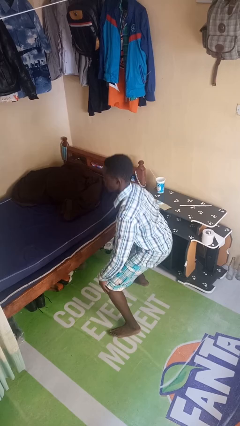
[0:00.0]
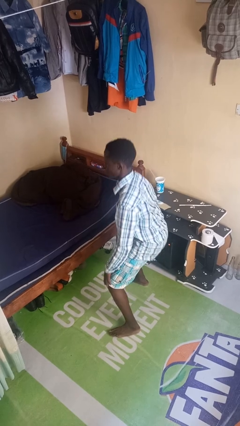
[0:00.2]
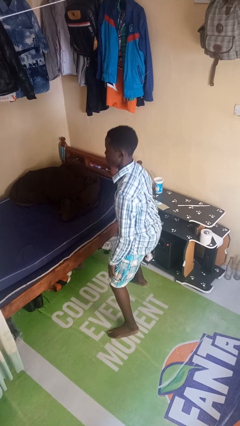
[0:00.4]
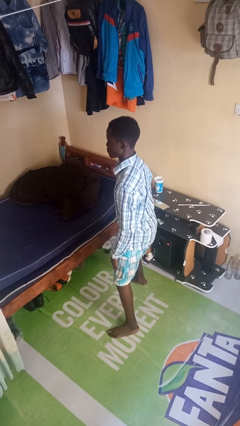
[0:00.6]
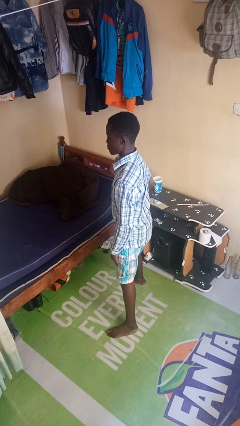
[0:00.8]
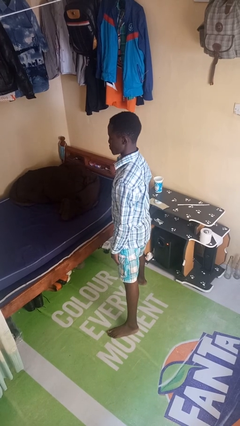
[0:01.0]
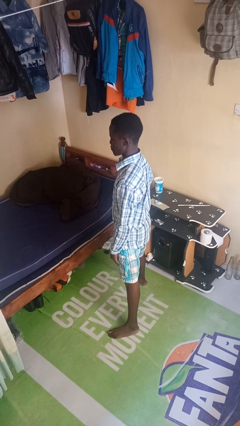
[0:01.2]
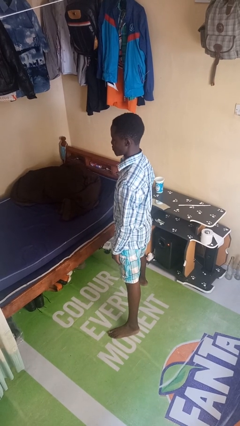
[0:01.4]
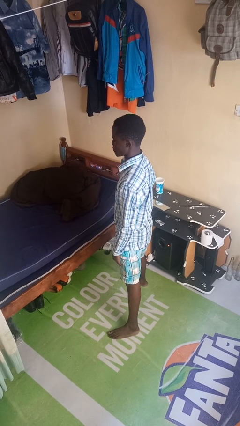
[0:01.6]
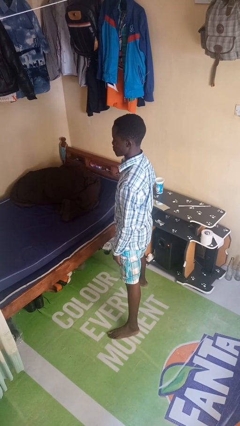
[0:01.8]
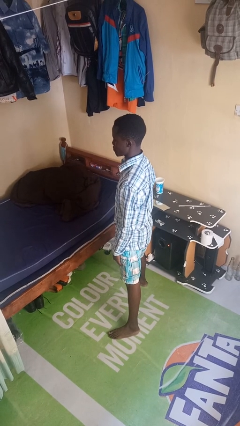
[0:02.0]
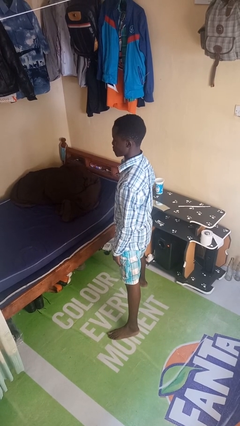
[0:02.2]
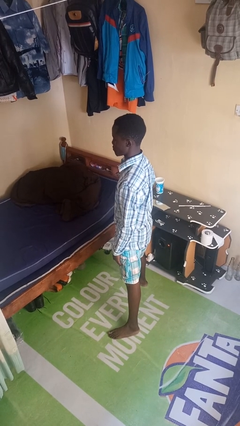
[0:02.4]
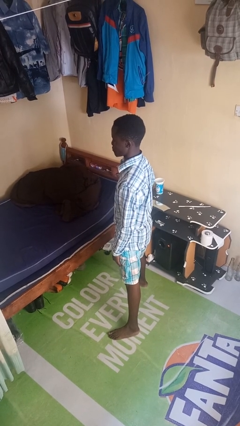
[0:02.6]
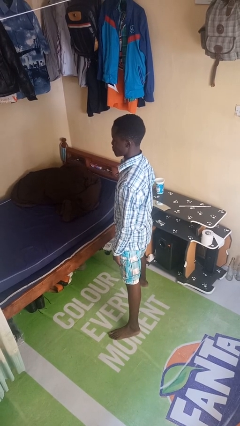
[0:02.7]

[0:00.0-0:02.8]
person stands up

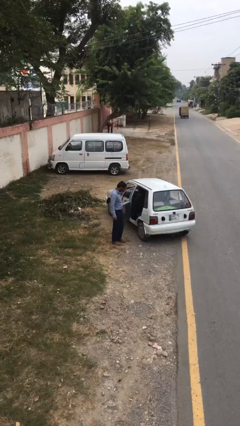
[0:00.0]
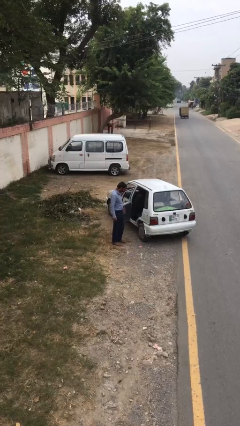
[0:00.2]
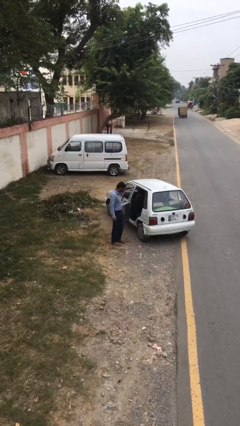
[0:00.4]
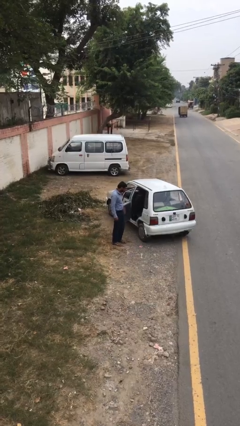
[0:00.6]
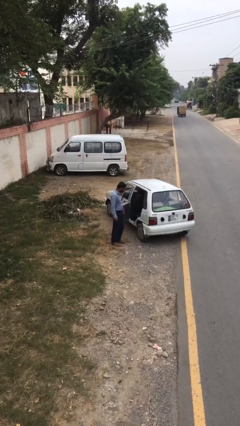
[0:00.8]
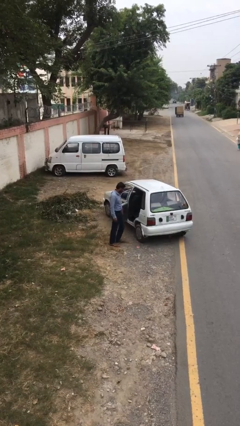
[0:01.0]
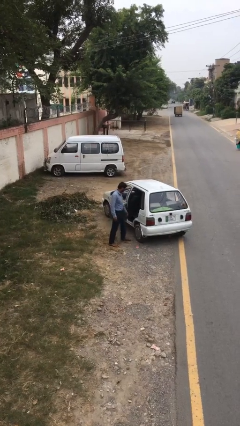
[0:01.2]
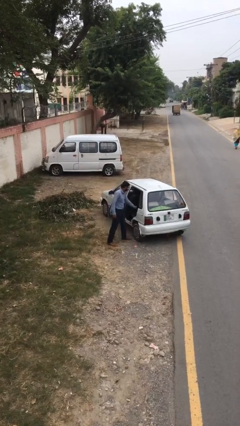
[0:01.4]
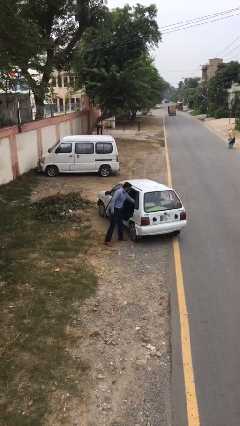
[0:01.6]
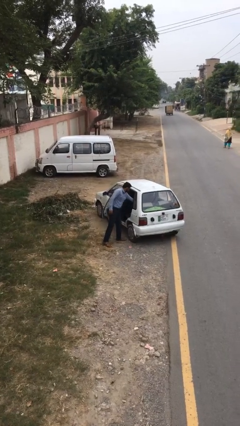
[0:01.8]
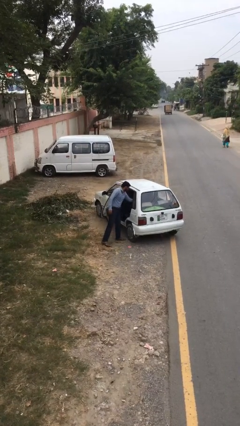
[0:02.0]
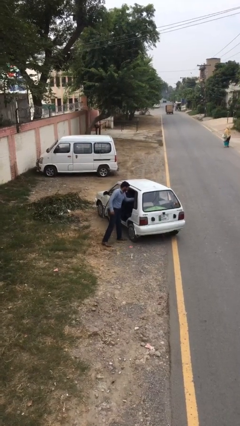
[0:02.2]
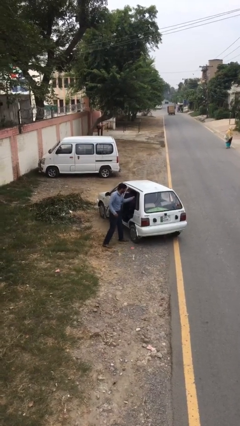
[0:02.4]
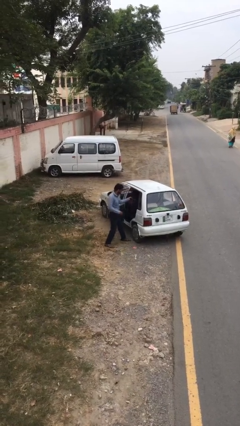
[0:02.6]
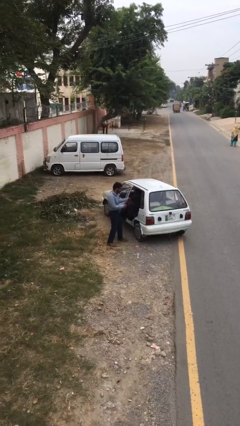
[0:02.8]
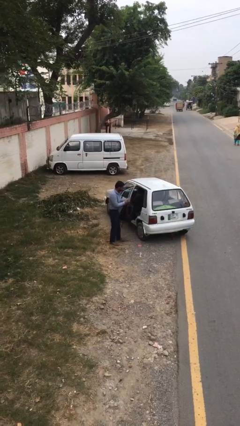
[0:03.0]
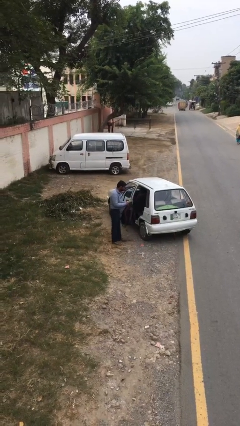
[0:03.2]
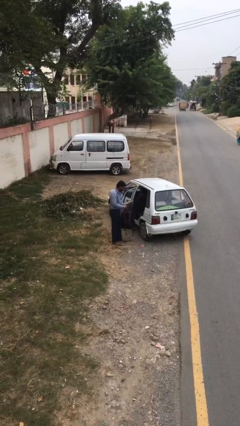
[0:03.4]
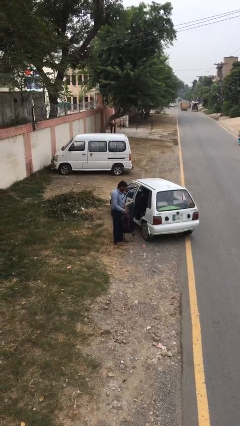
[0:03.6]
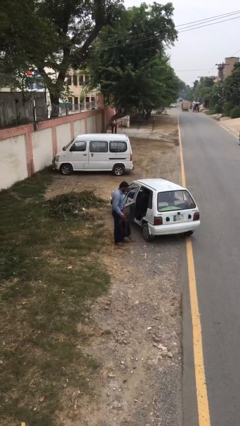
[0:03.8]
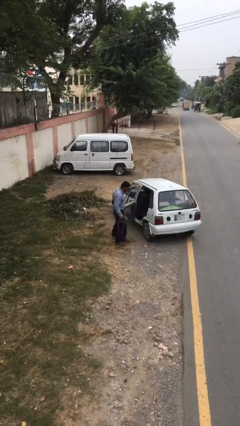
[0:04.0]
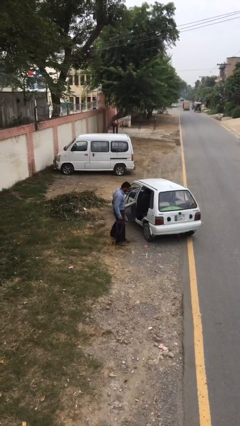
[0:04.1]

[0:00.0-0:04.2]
person unloads car

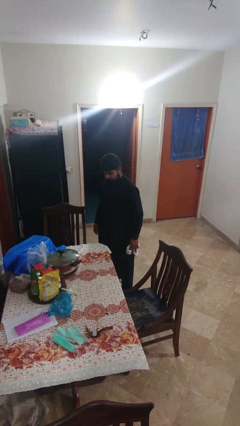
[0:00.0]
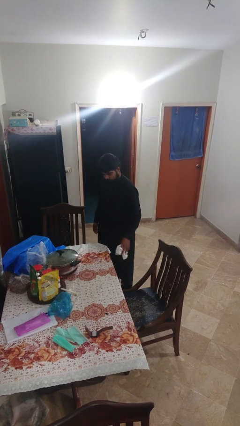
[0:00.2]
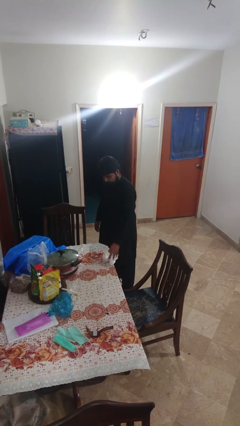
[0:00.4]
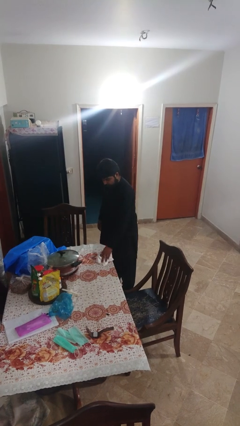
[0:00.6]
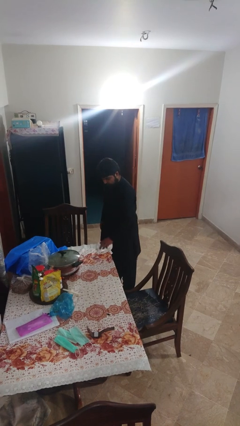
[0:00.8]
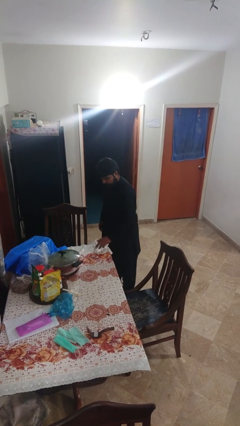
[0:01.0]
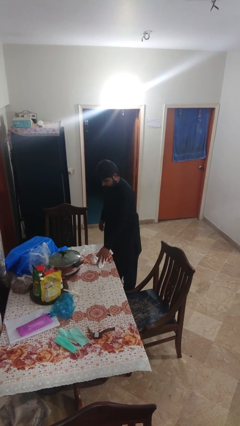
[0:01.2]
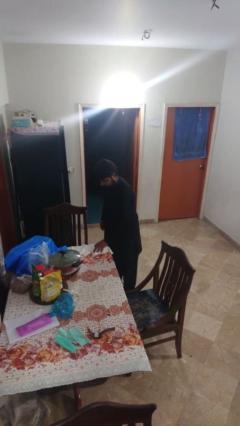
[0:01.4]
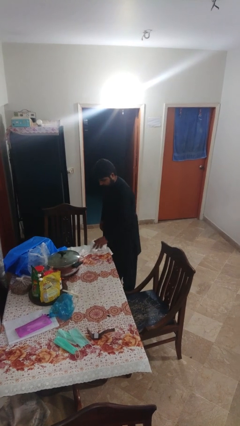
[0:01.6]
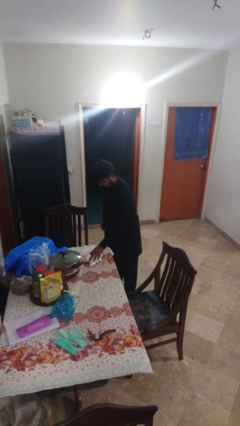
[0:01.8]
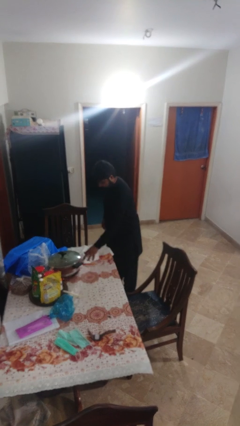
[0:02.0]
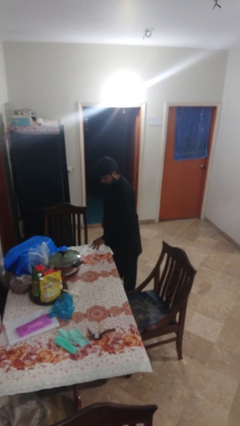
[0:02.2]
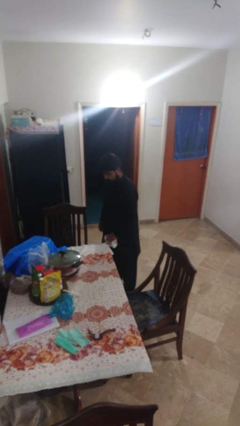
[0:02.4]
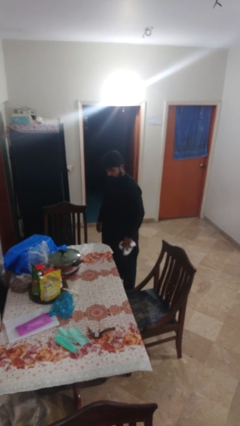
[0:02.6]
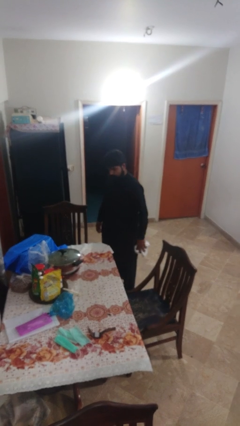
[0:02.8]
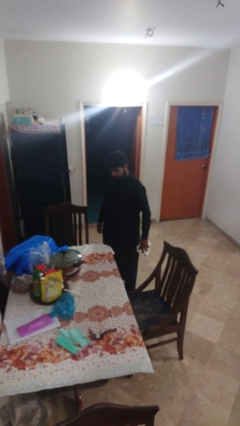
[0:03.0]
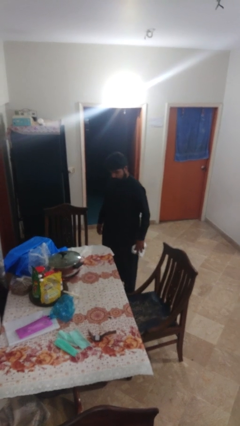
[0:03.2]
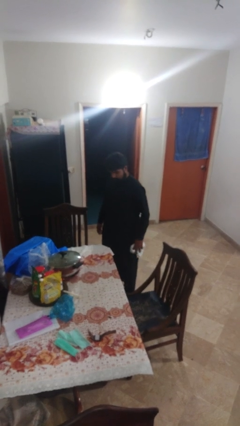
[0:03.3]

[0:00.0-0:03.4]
person cleans table with rag

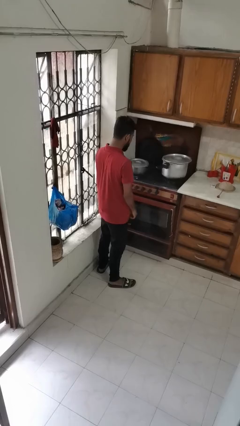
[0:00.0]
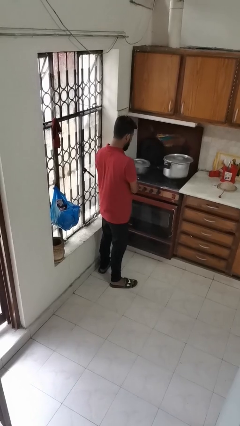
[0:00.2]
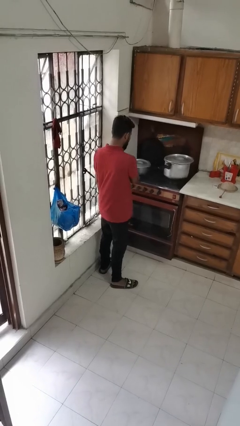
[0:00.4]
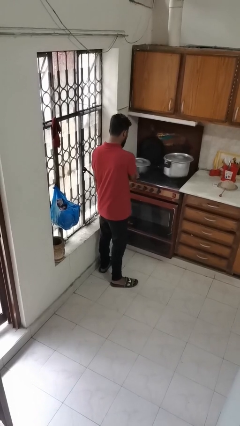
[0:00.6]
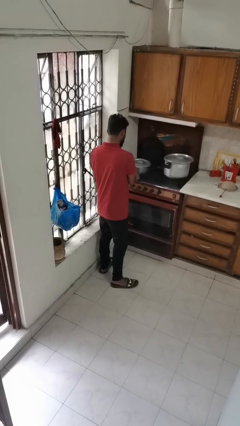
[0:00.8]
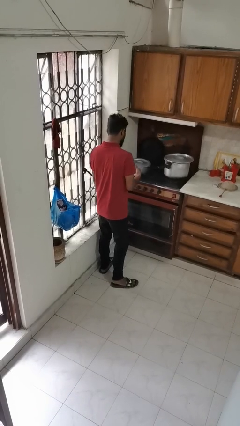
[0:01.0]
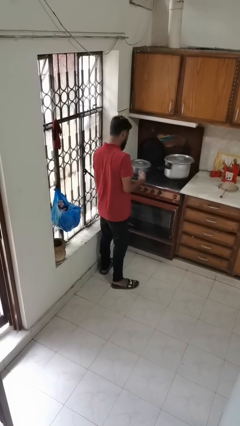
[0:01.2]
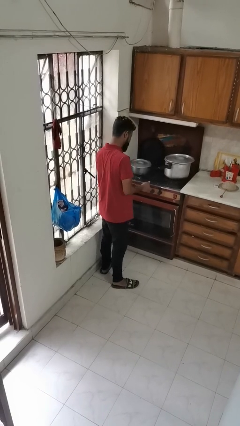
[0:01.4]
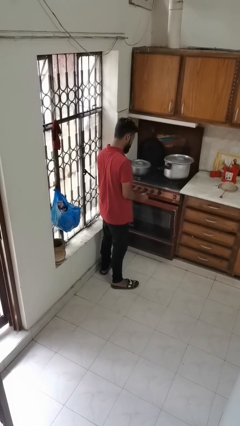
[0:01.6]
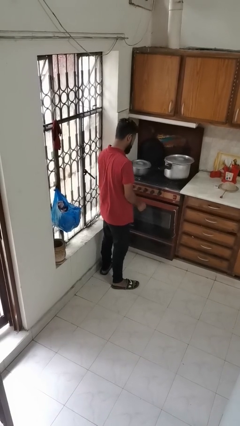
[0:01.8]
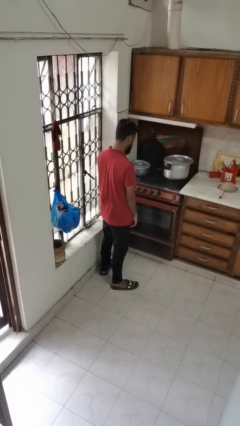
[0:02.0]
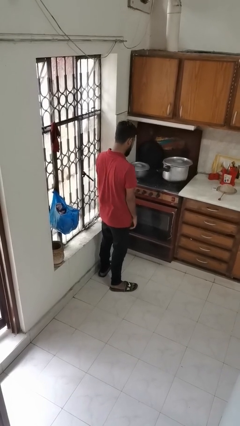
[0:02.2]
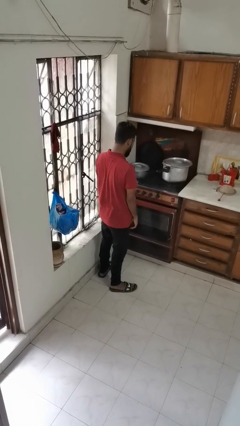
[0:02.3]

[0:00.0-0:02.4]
person burns hand

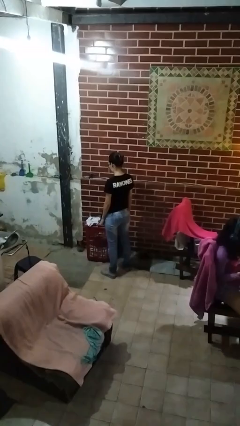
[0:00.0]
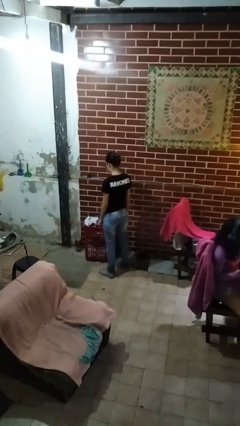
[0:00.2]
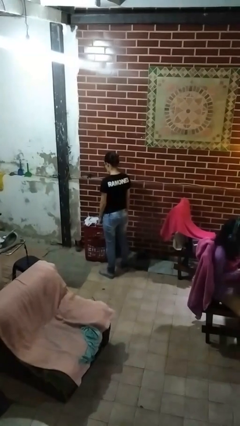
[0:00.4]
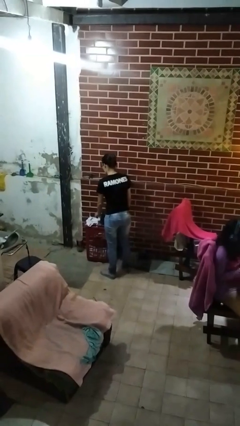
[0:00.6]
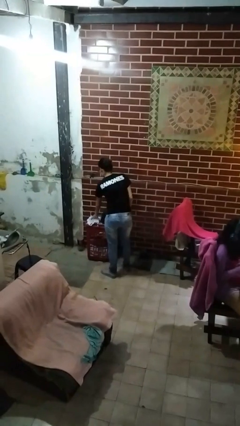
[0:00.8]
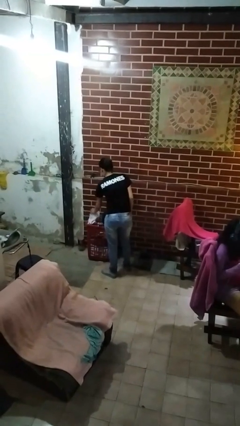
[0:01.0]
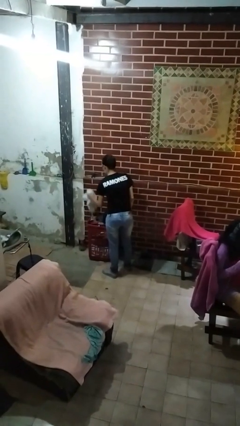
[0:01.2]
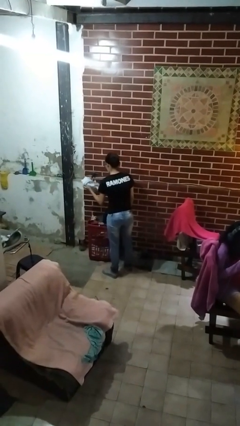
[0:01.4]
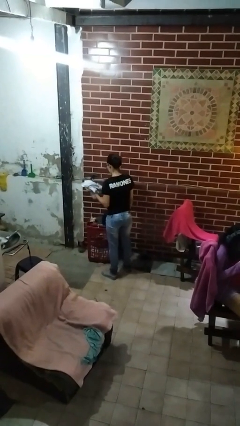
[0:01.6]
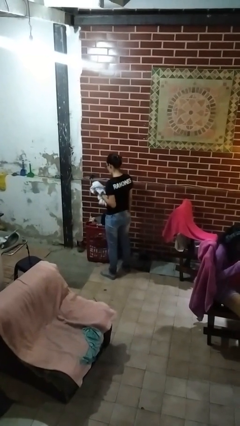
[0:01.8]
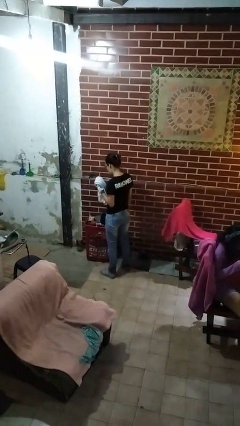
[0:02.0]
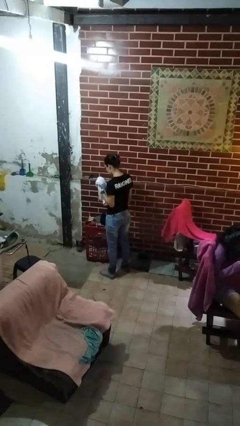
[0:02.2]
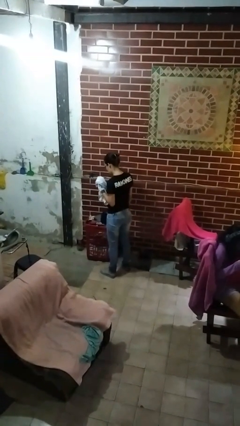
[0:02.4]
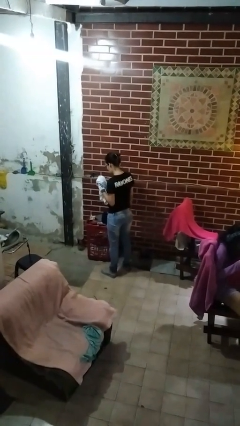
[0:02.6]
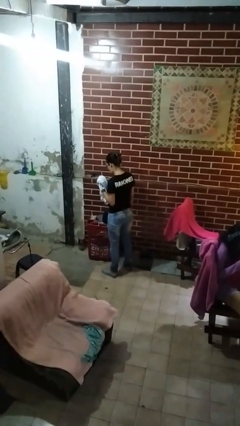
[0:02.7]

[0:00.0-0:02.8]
person takes object from basket

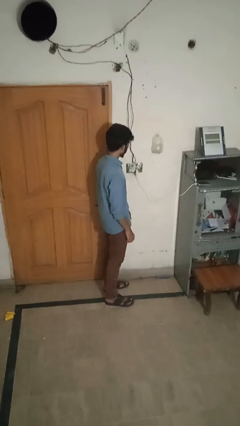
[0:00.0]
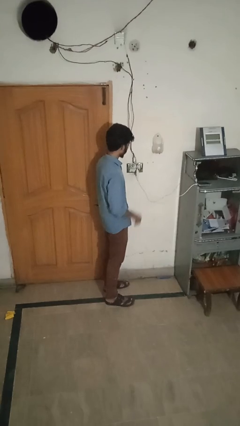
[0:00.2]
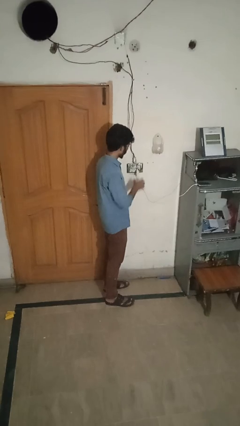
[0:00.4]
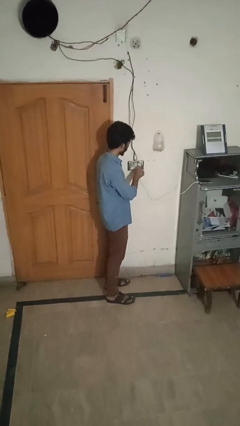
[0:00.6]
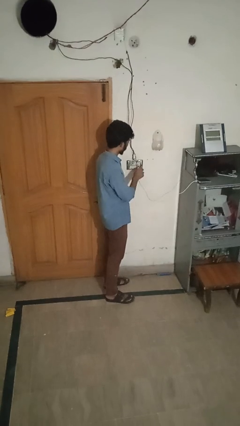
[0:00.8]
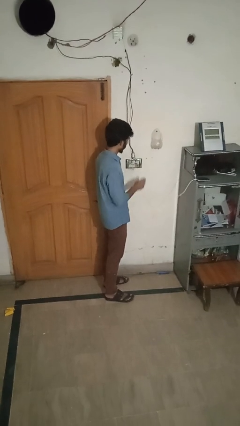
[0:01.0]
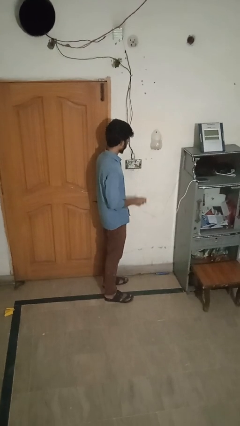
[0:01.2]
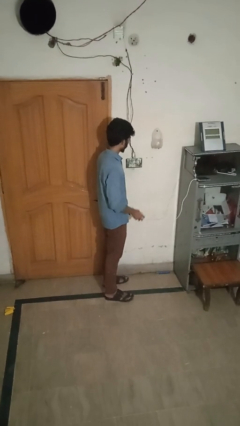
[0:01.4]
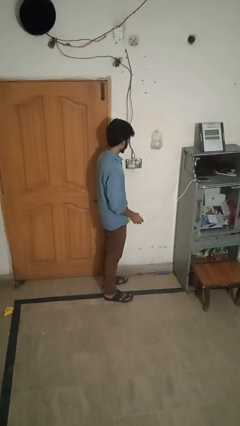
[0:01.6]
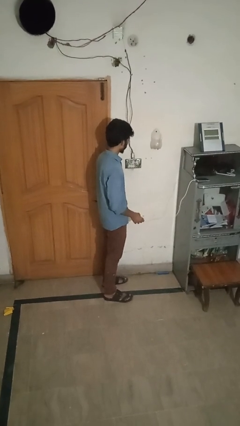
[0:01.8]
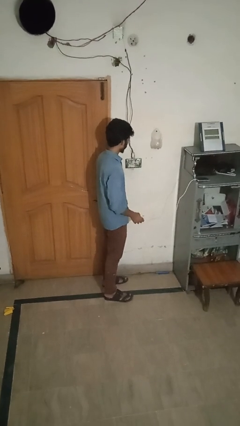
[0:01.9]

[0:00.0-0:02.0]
person unplugs from electrical socket
